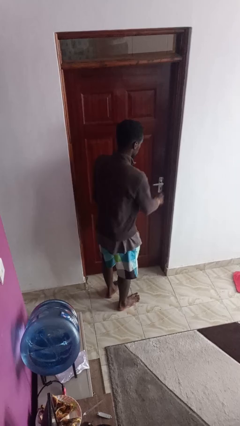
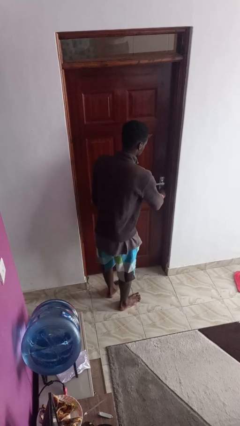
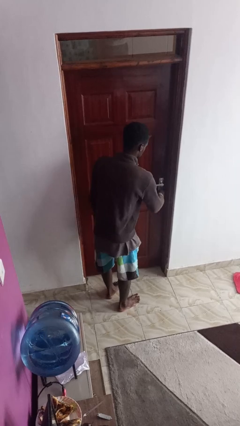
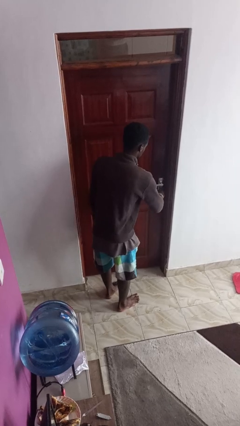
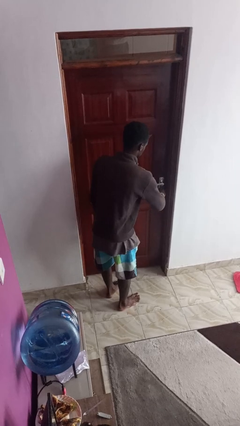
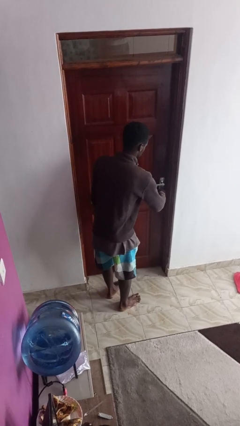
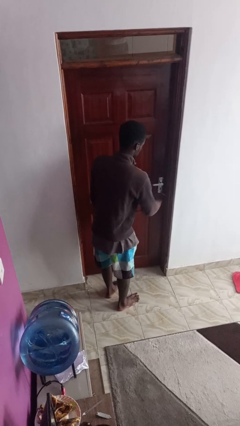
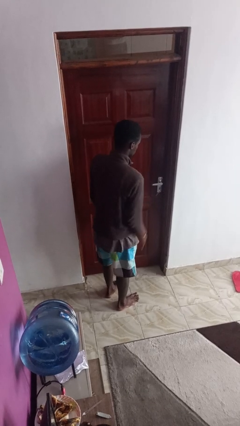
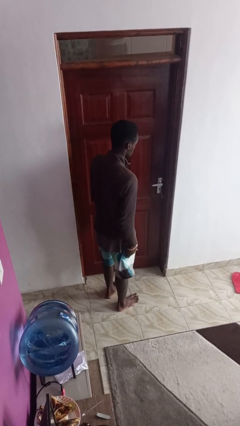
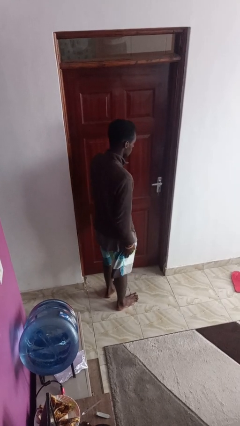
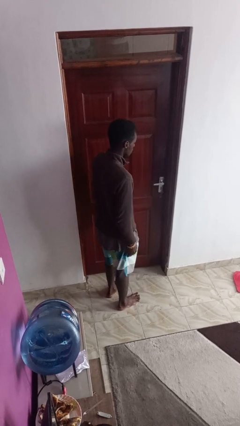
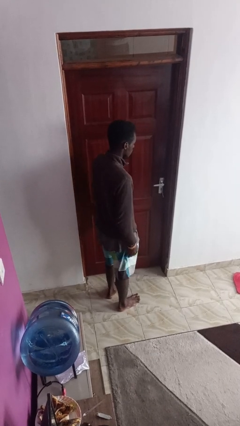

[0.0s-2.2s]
person locks door with keys

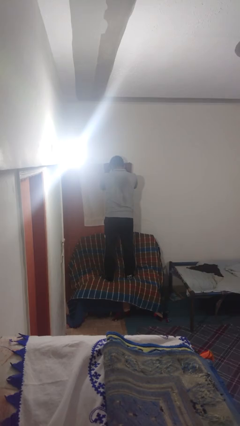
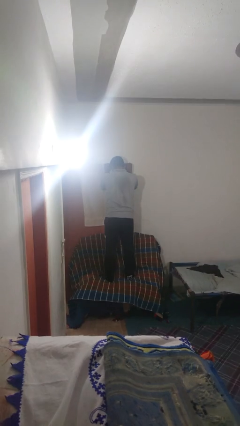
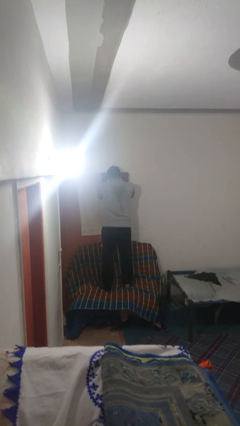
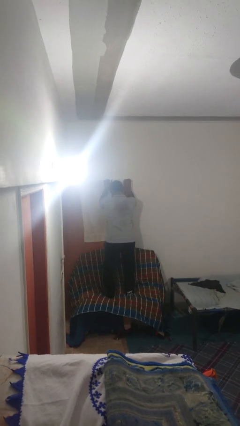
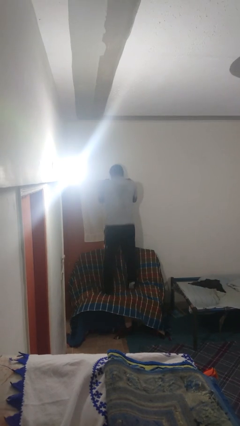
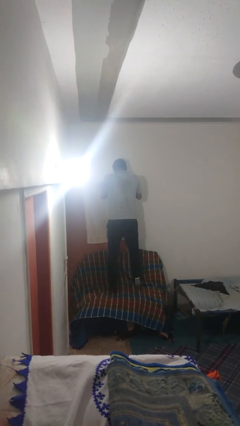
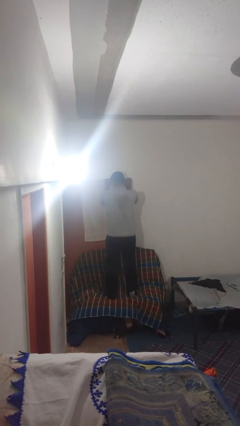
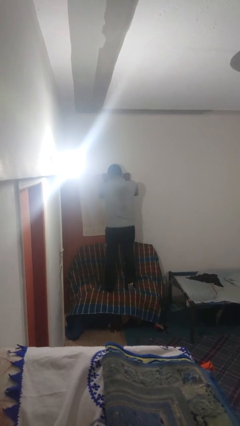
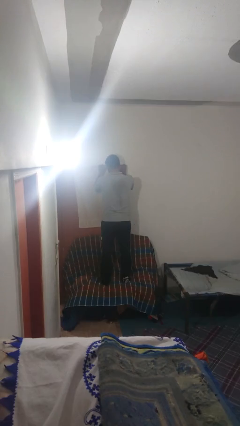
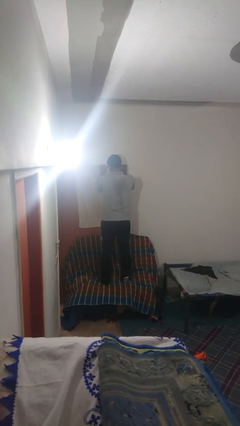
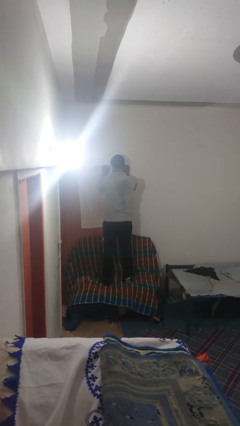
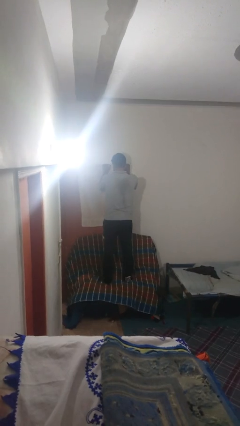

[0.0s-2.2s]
person jumps on couch

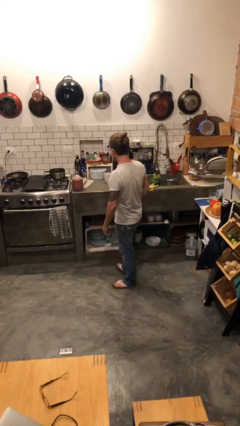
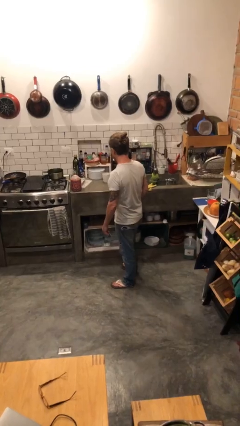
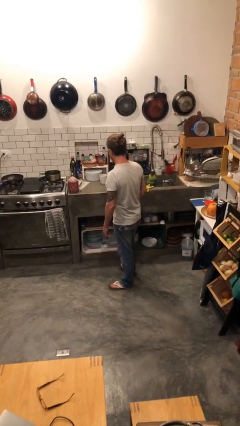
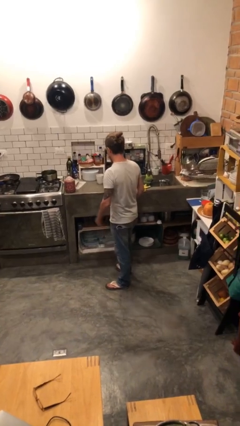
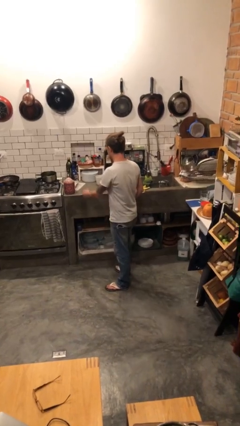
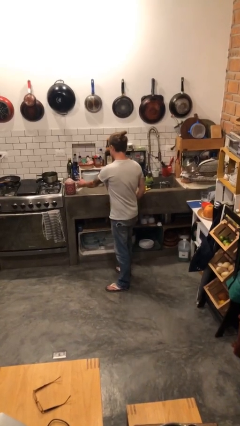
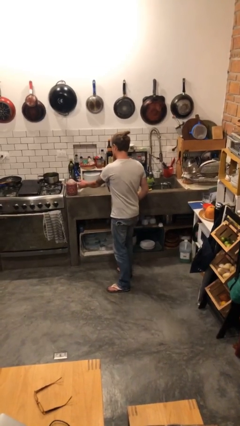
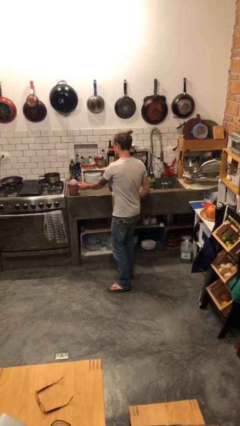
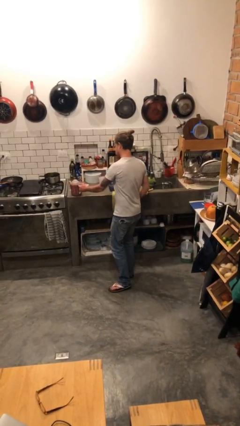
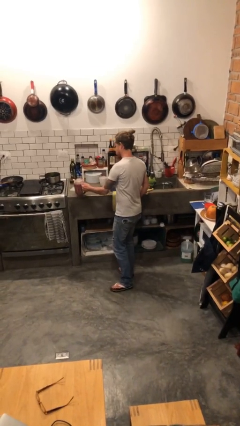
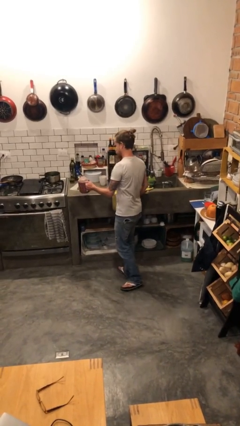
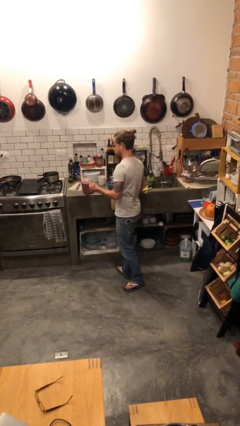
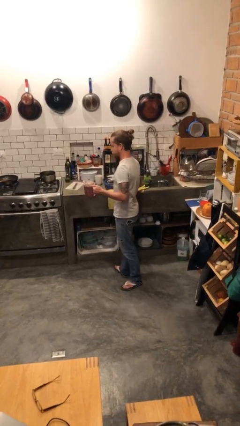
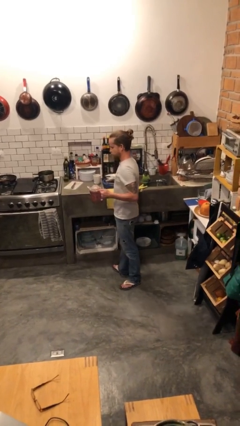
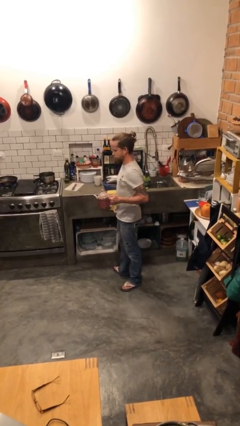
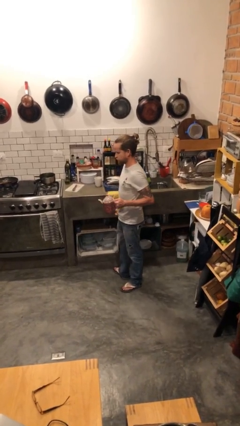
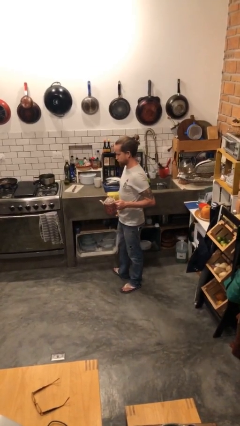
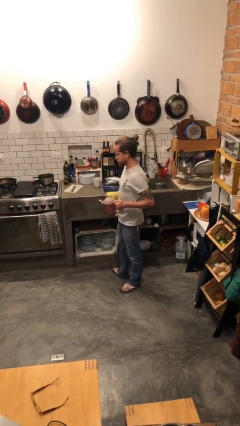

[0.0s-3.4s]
person picks up object from countertop

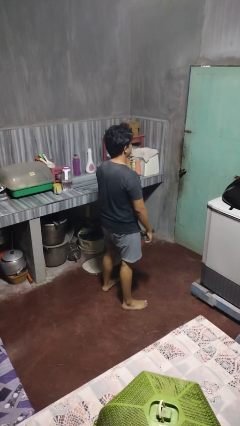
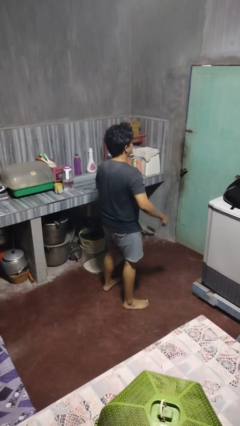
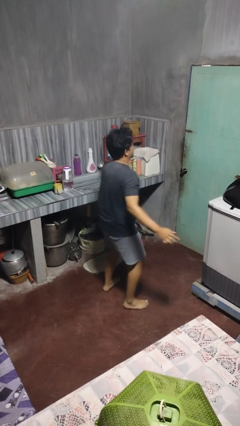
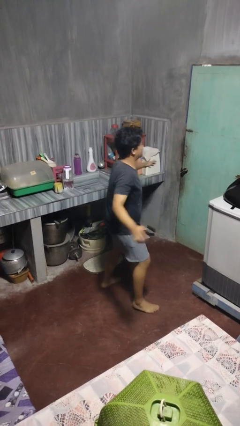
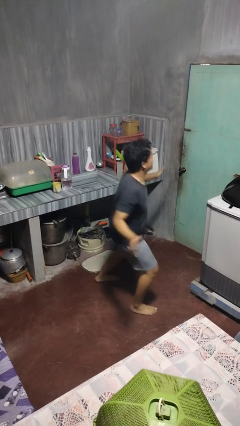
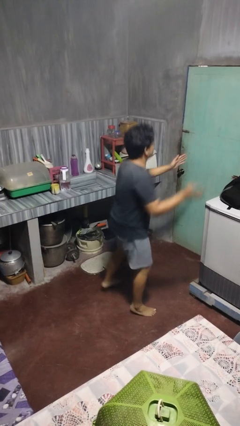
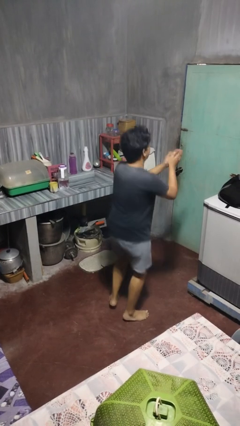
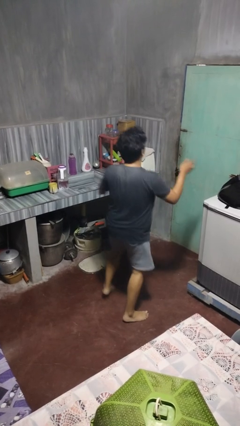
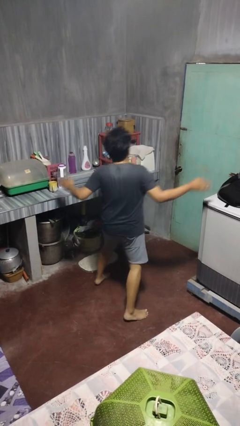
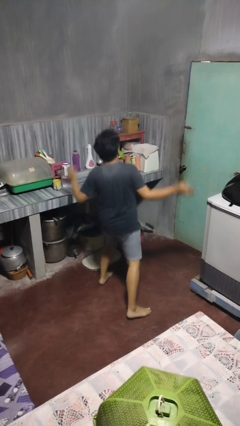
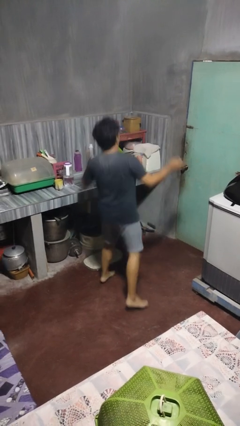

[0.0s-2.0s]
person dances in place

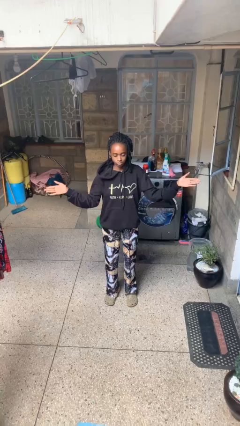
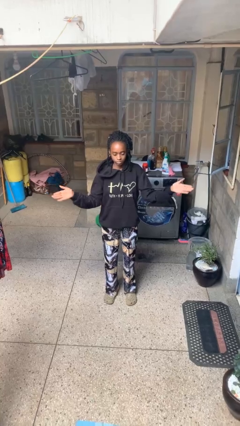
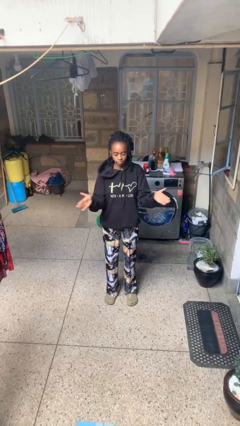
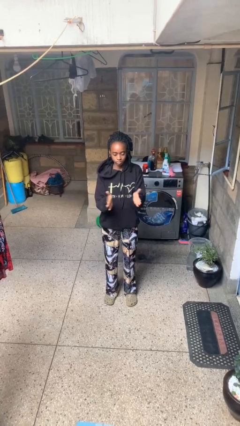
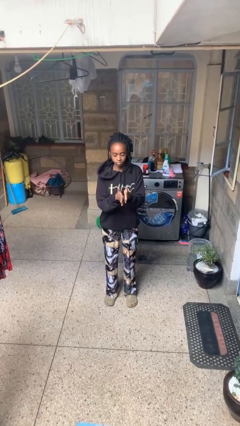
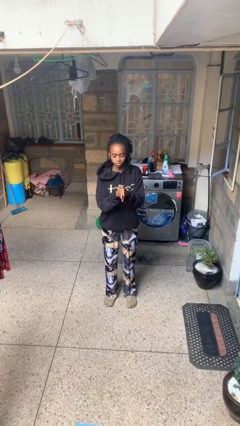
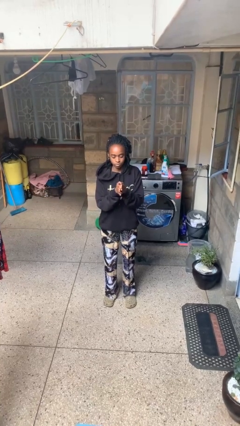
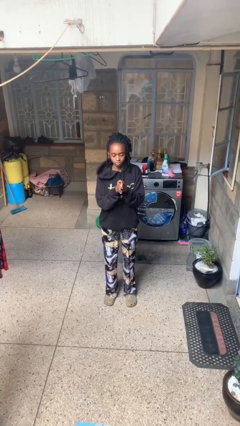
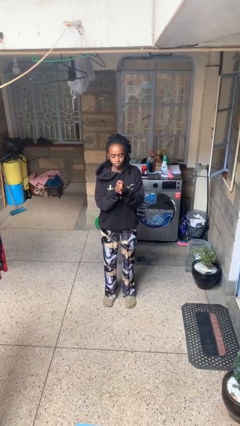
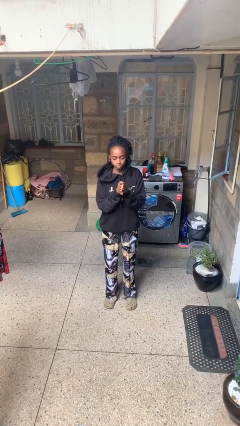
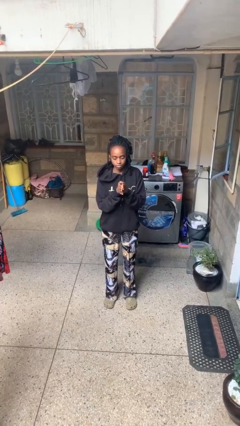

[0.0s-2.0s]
person gestures zoom out

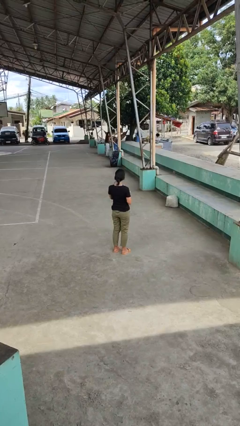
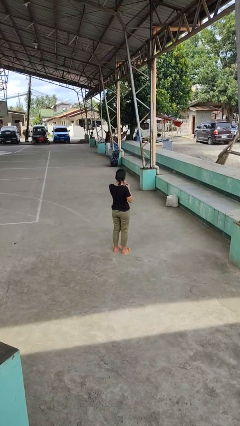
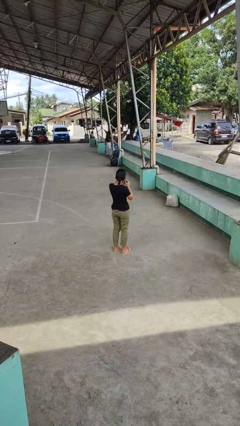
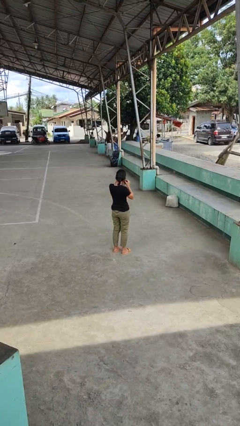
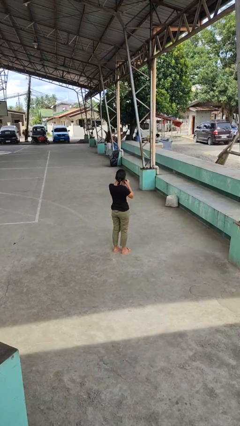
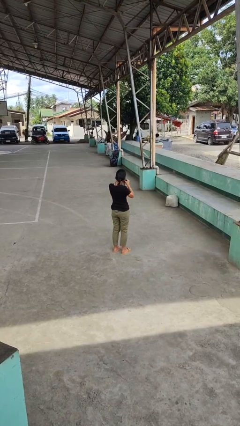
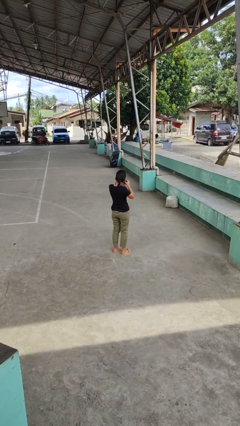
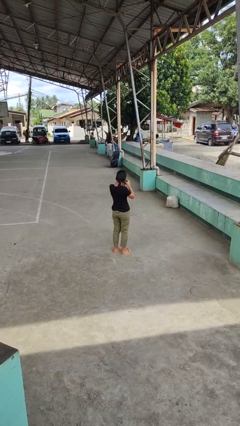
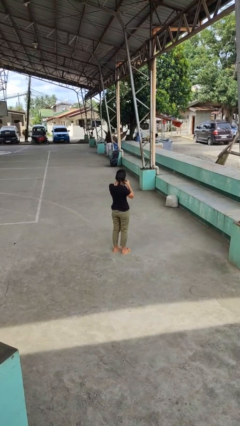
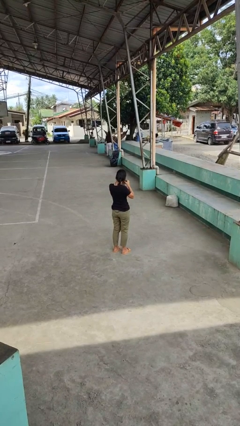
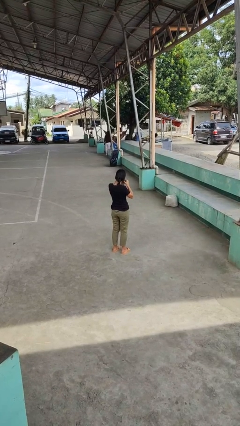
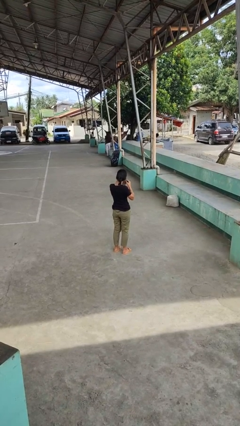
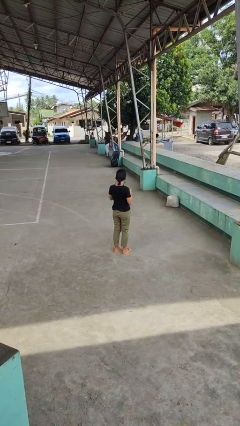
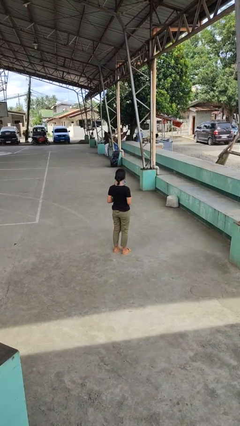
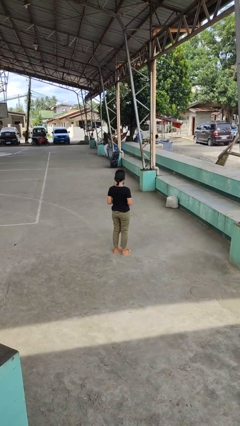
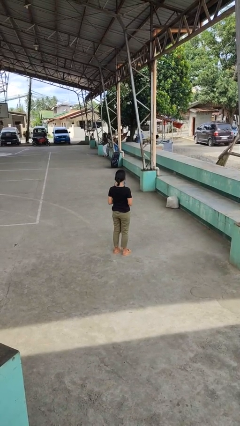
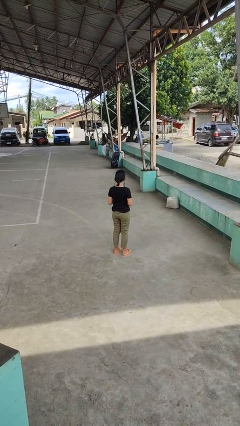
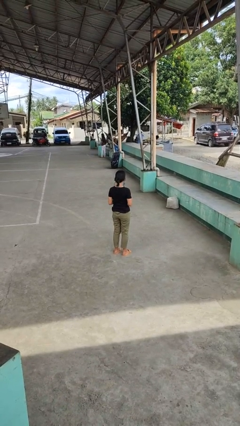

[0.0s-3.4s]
person puts on earrings

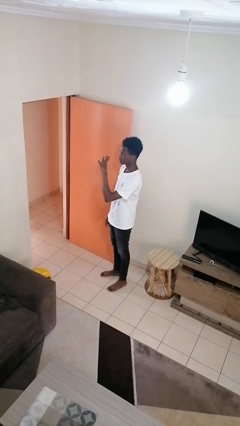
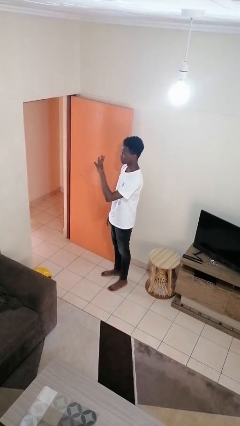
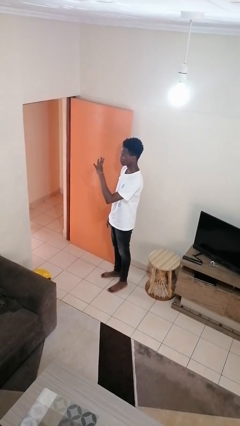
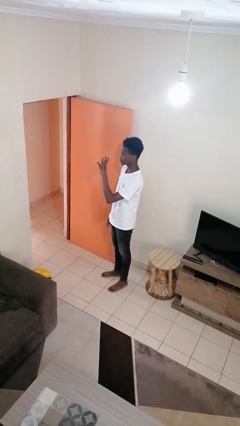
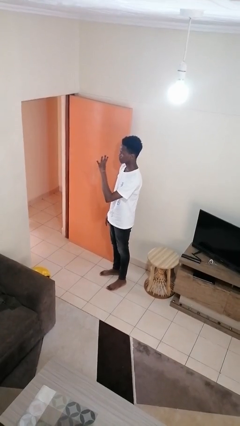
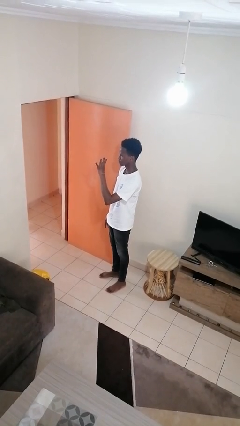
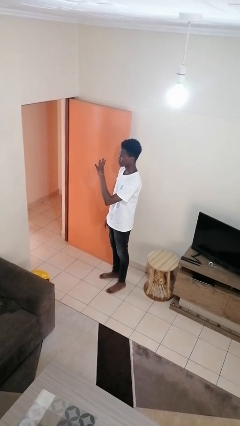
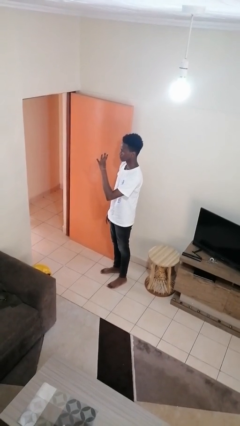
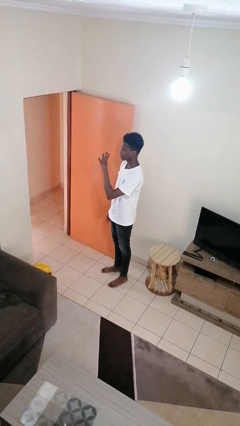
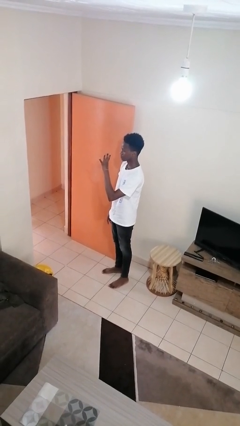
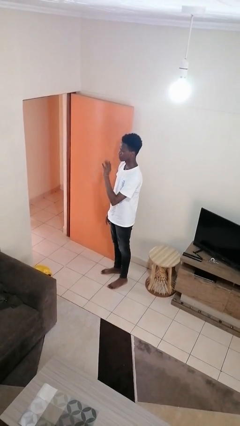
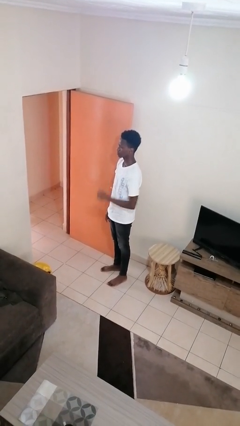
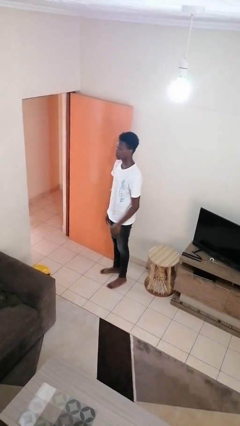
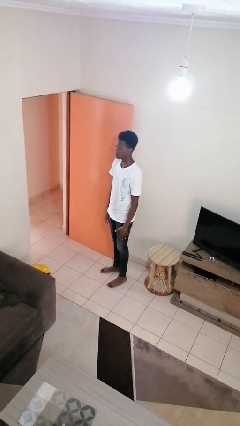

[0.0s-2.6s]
person gestures number four
